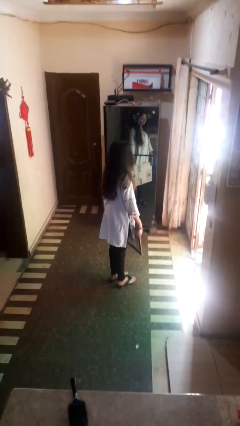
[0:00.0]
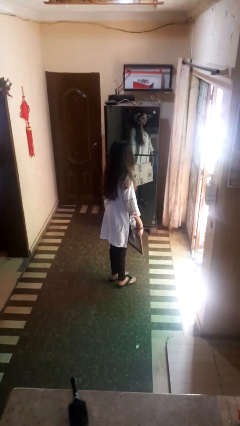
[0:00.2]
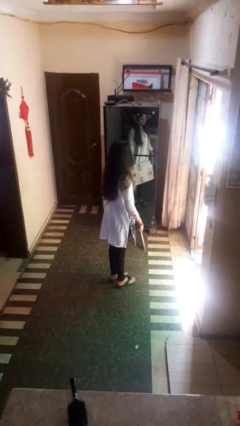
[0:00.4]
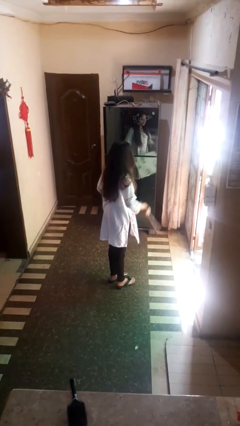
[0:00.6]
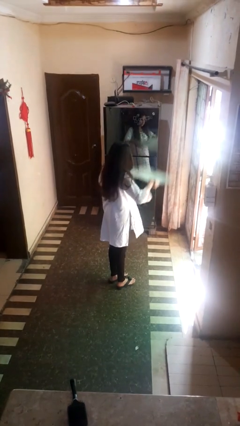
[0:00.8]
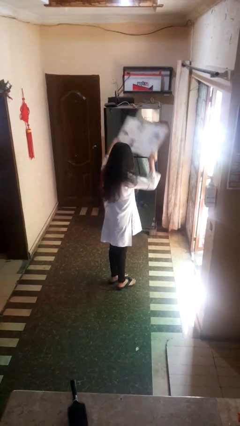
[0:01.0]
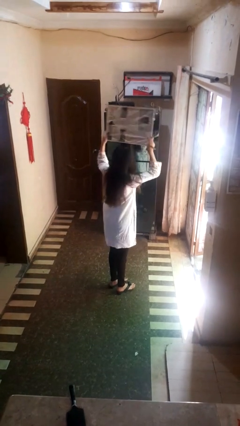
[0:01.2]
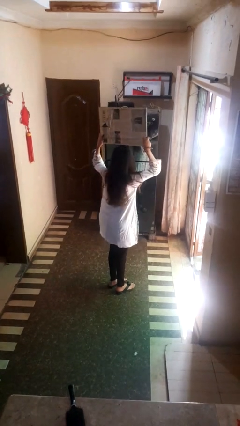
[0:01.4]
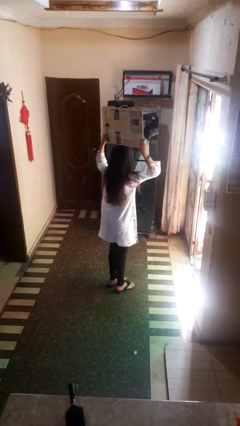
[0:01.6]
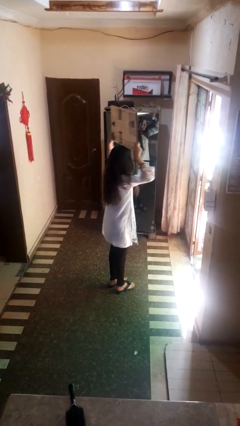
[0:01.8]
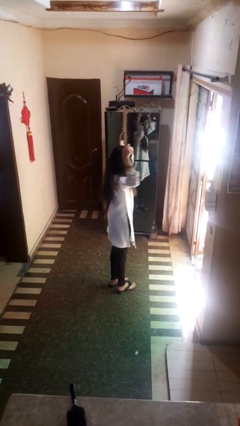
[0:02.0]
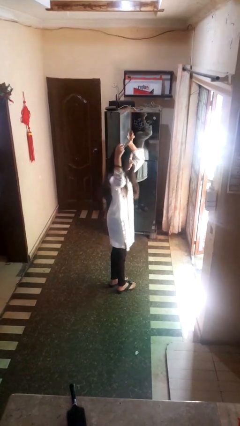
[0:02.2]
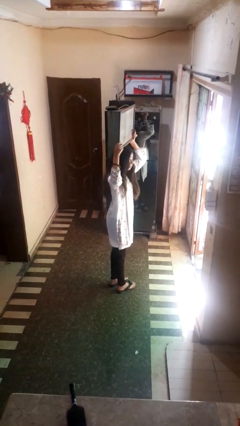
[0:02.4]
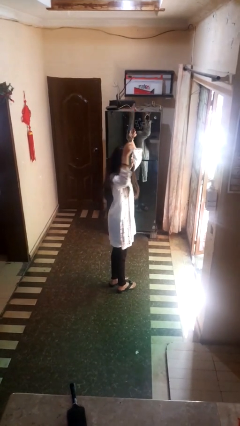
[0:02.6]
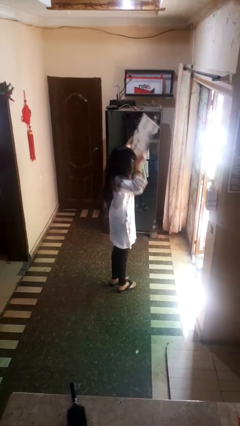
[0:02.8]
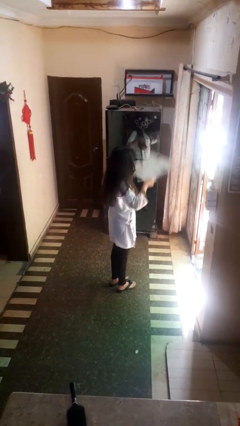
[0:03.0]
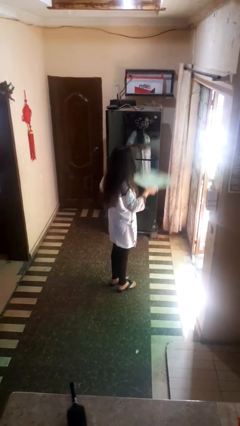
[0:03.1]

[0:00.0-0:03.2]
person holds object above head

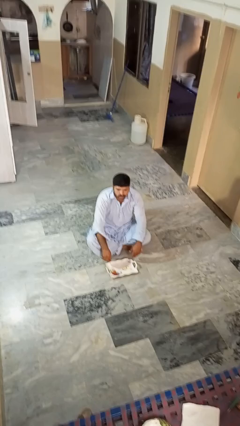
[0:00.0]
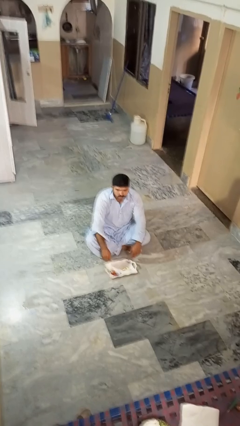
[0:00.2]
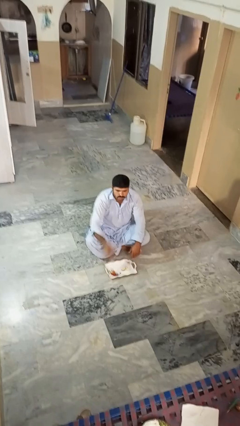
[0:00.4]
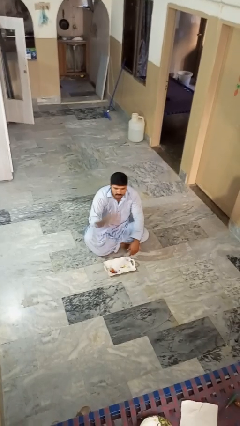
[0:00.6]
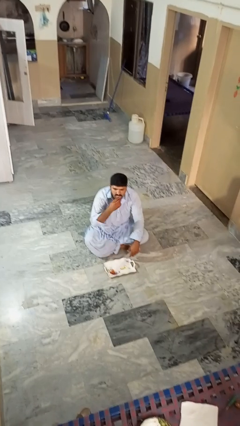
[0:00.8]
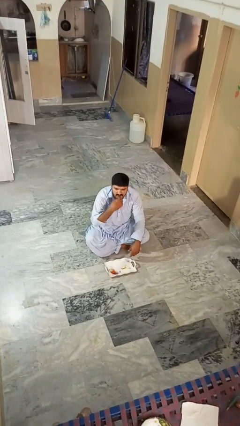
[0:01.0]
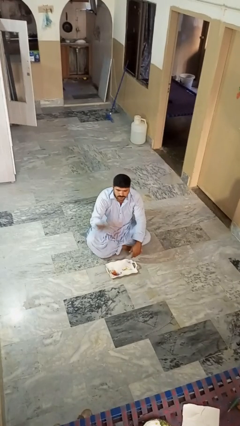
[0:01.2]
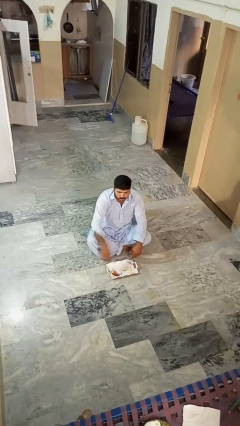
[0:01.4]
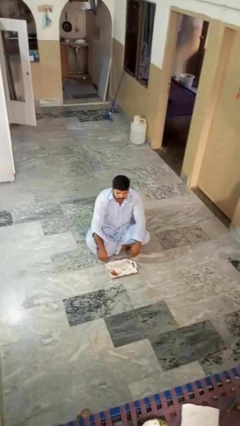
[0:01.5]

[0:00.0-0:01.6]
person eats apple

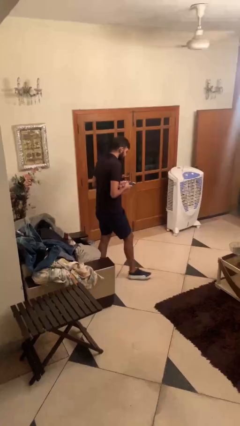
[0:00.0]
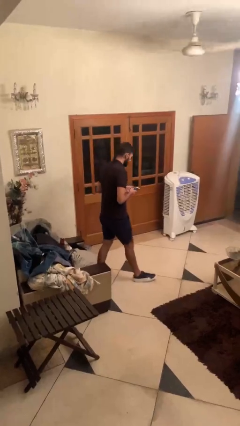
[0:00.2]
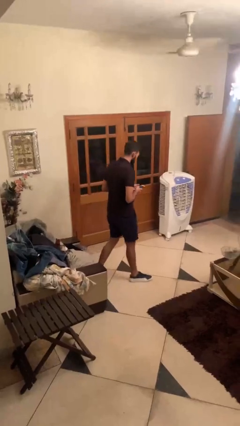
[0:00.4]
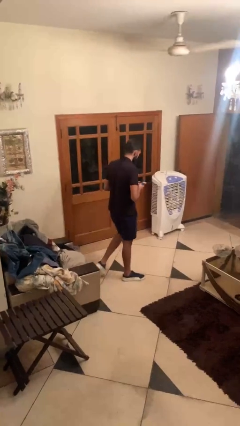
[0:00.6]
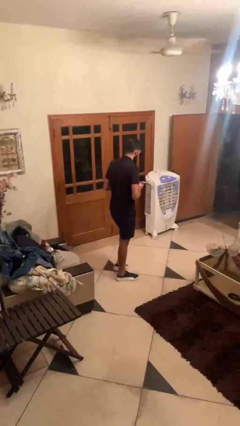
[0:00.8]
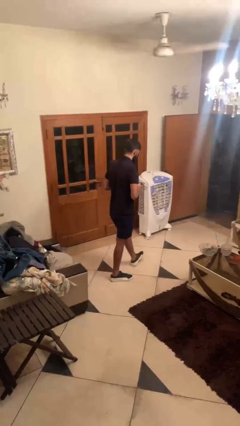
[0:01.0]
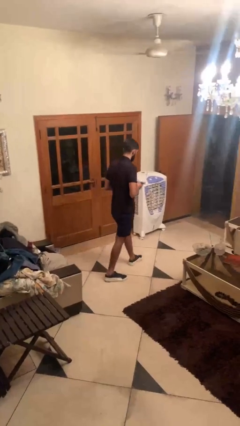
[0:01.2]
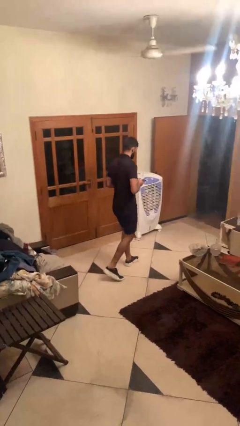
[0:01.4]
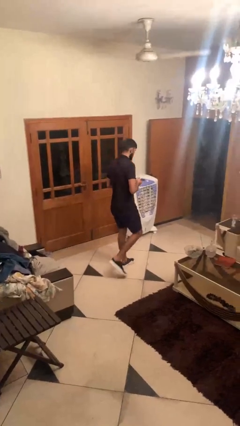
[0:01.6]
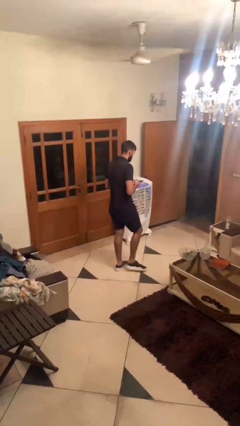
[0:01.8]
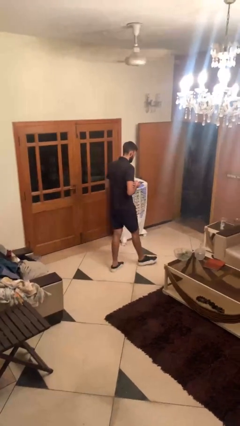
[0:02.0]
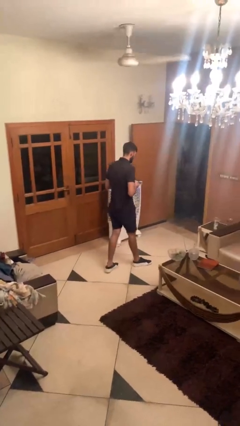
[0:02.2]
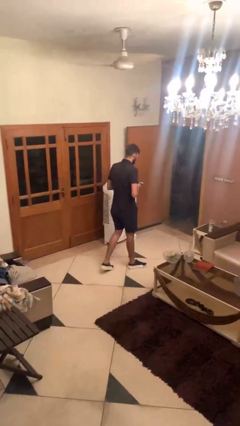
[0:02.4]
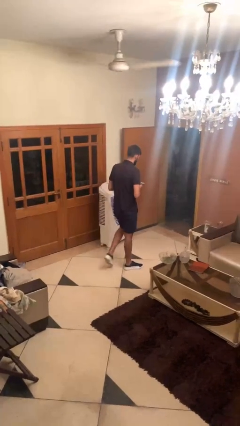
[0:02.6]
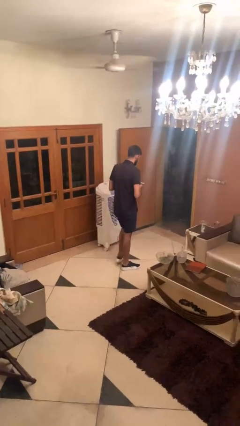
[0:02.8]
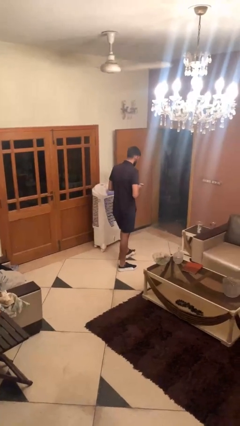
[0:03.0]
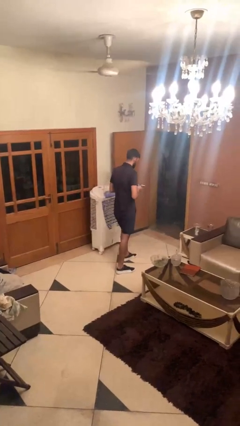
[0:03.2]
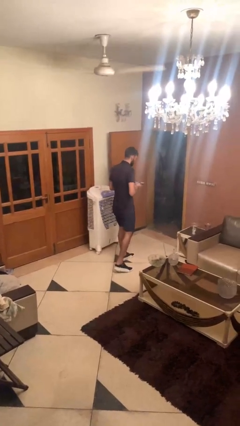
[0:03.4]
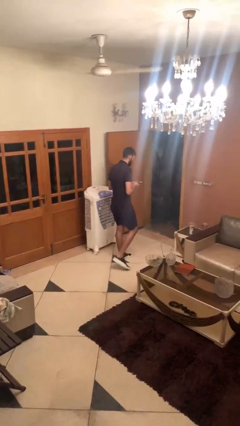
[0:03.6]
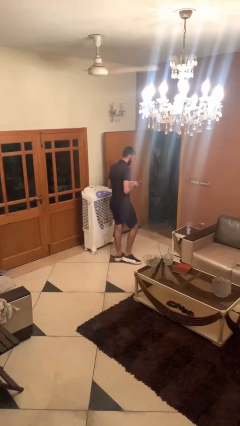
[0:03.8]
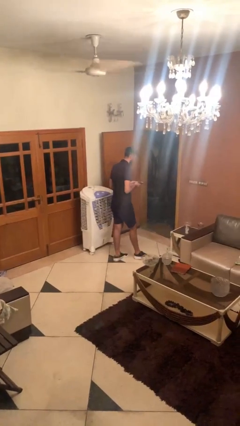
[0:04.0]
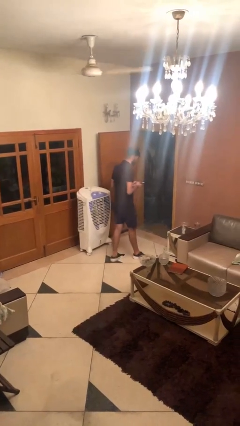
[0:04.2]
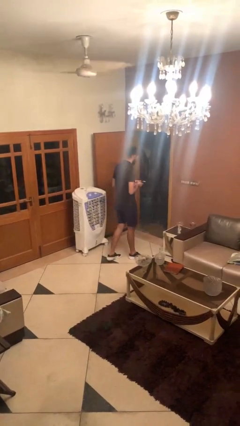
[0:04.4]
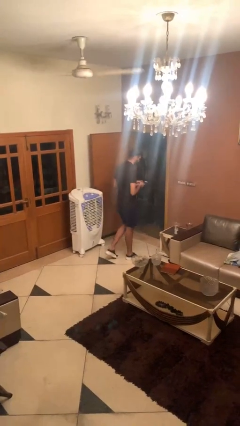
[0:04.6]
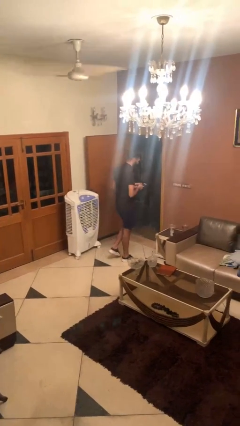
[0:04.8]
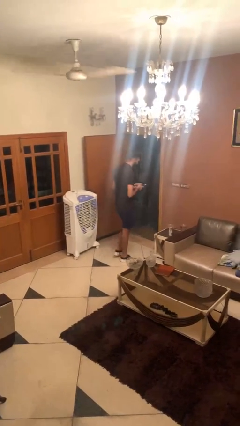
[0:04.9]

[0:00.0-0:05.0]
person texts on phone

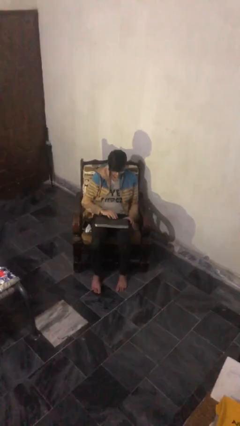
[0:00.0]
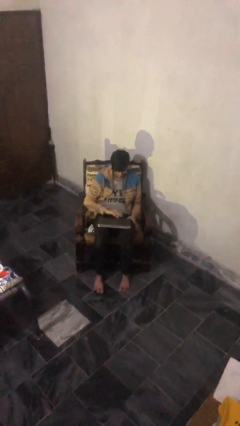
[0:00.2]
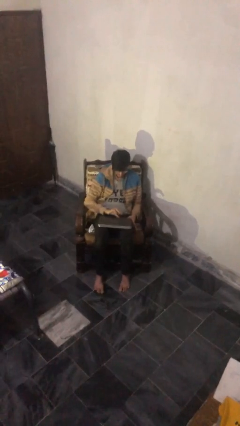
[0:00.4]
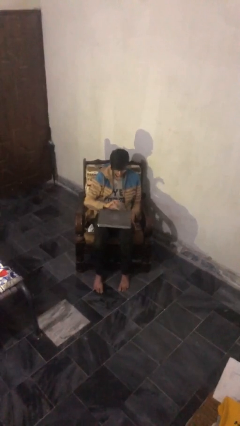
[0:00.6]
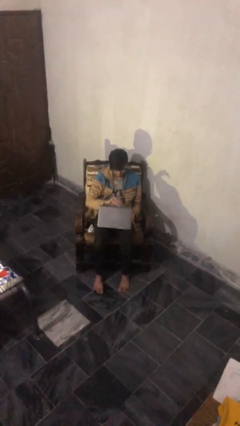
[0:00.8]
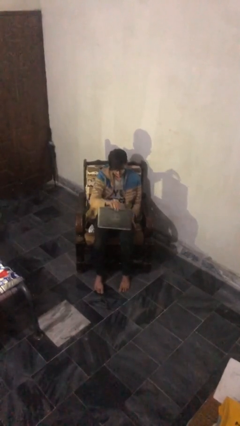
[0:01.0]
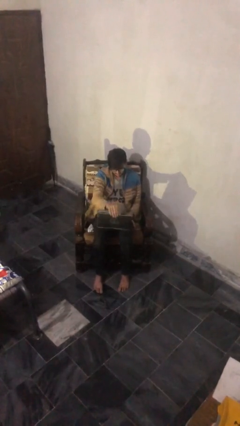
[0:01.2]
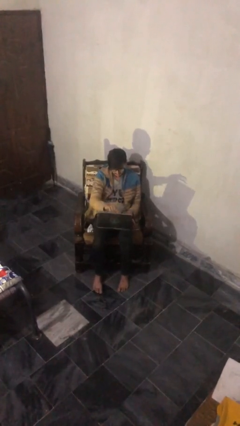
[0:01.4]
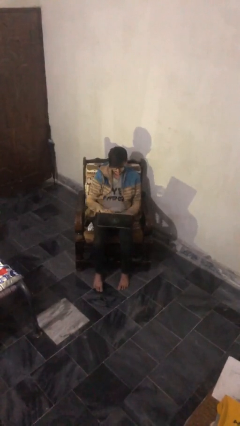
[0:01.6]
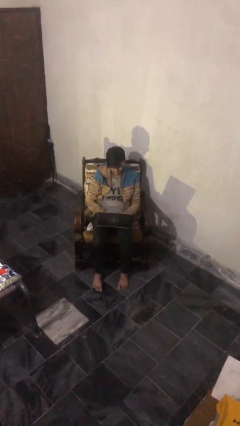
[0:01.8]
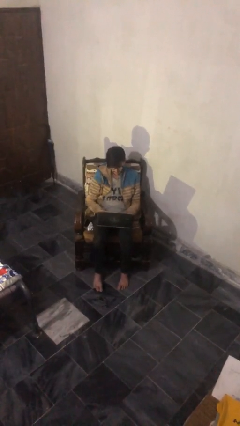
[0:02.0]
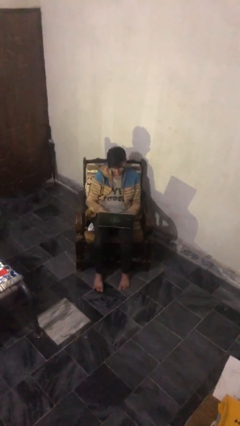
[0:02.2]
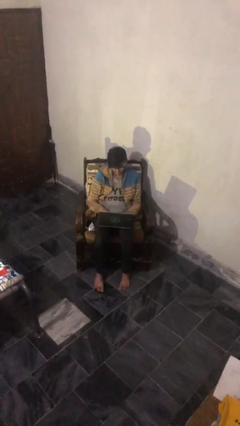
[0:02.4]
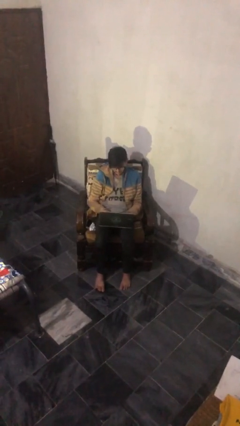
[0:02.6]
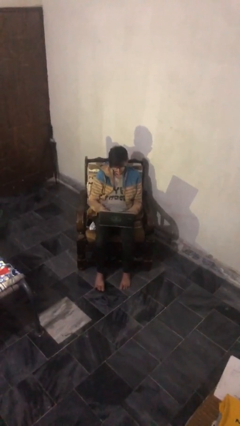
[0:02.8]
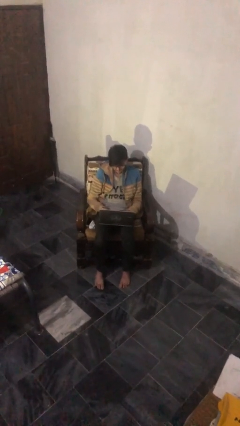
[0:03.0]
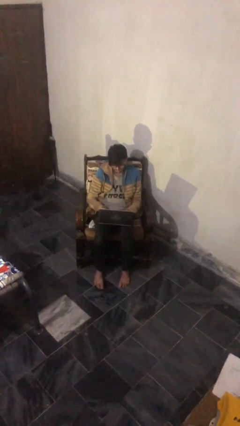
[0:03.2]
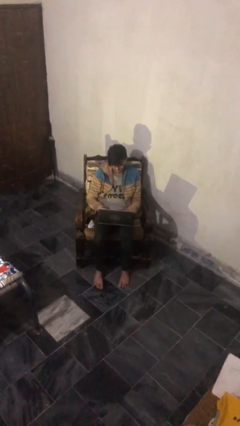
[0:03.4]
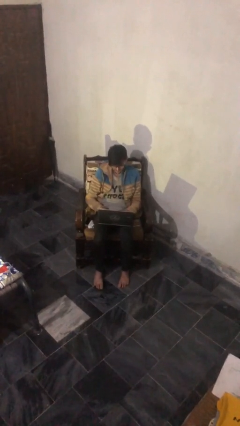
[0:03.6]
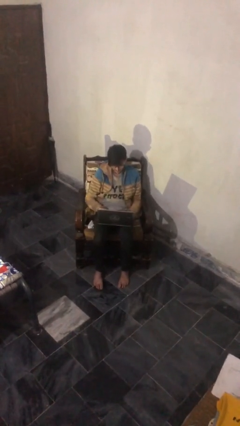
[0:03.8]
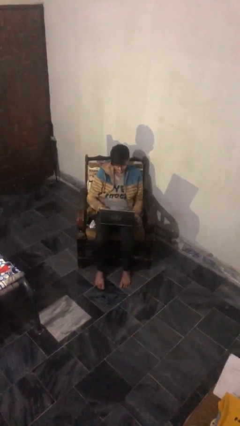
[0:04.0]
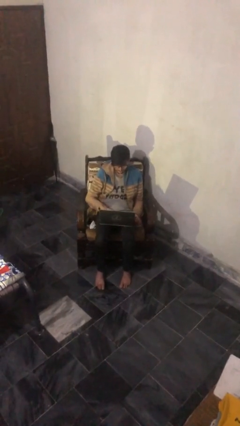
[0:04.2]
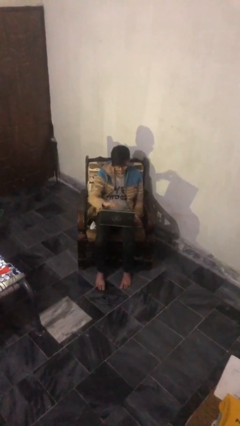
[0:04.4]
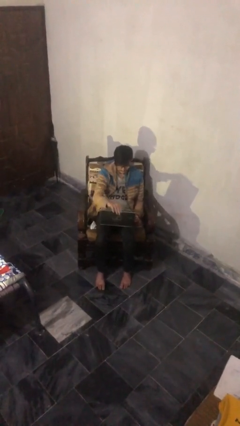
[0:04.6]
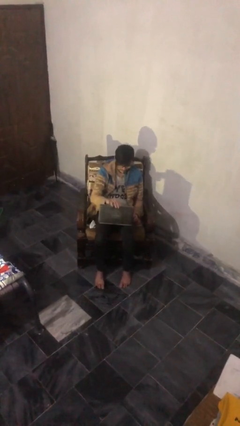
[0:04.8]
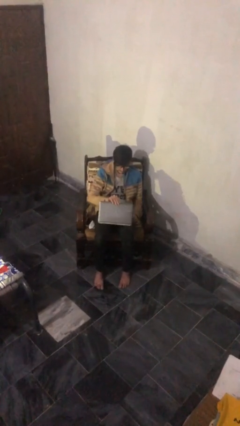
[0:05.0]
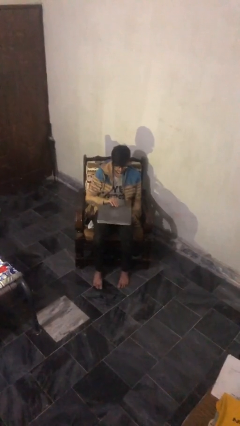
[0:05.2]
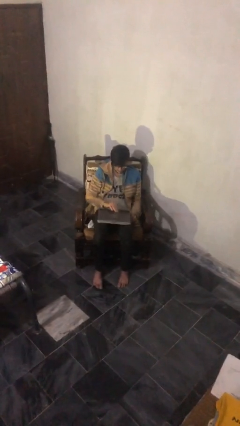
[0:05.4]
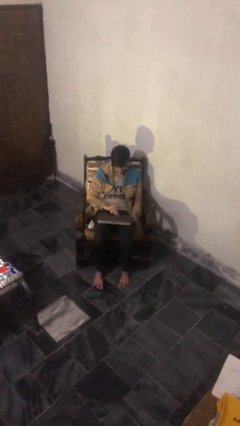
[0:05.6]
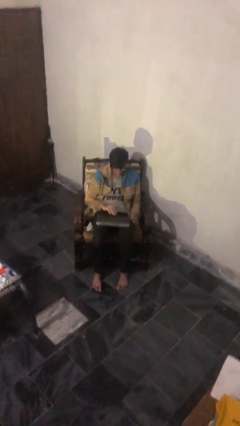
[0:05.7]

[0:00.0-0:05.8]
person interacts with laptop

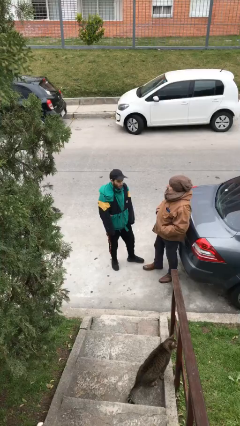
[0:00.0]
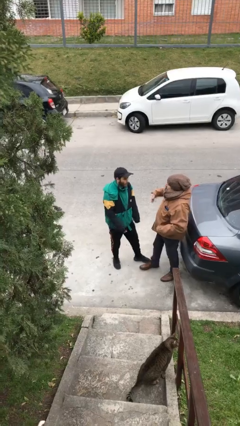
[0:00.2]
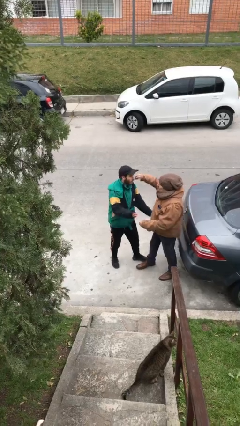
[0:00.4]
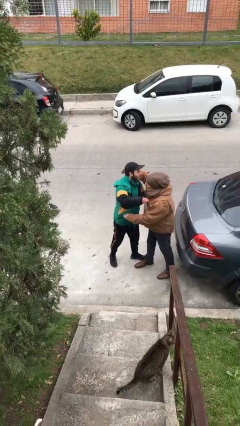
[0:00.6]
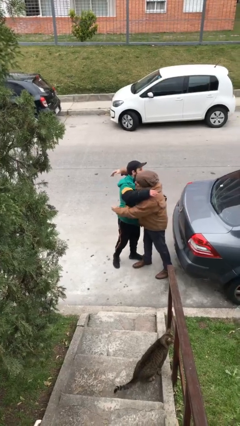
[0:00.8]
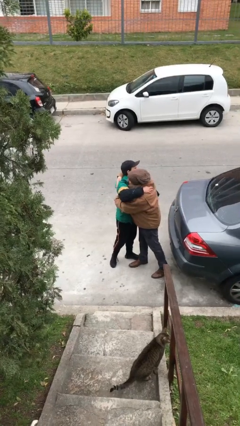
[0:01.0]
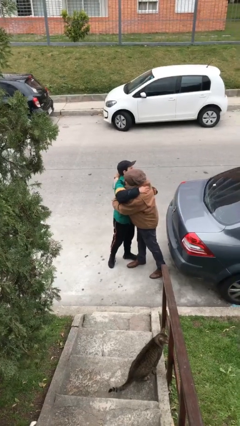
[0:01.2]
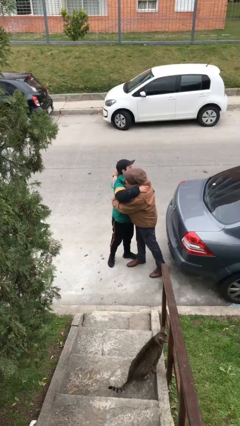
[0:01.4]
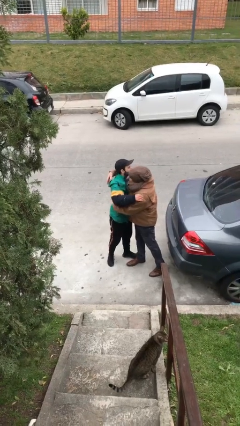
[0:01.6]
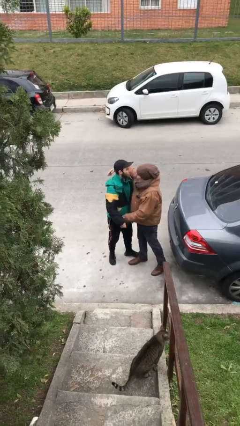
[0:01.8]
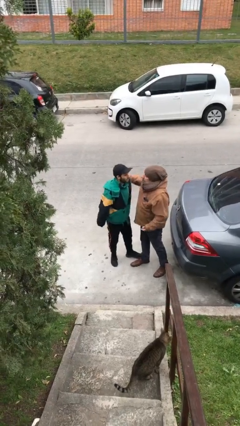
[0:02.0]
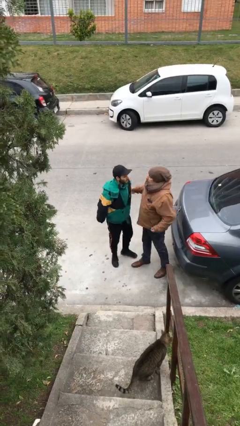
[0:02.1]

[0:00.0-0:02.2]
person embraces person
